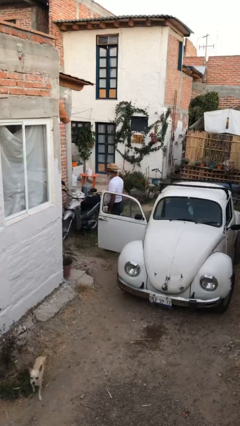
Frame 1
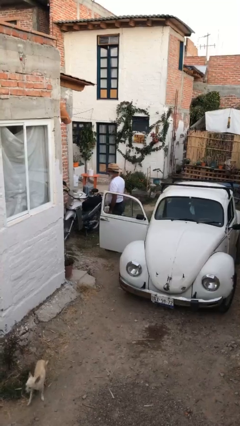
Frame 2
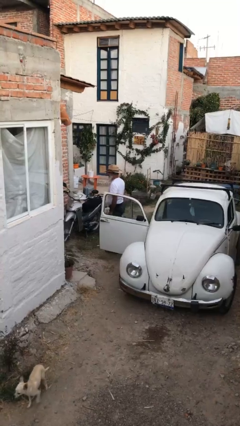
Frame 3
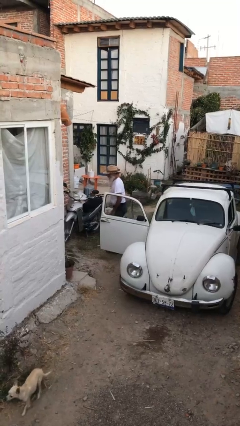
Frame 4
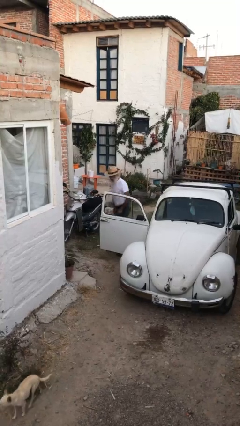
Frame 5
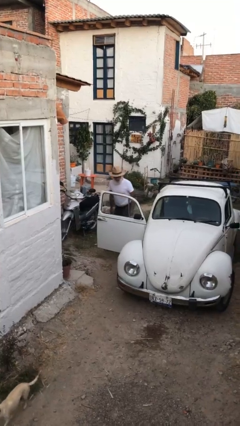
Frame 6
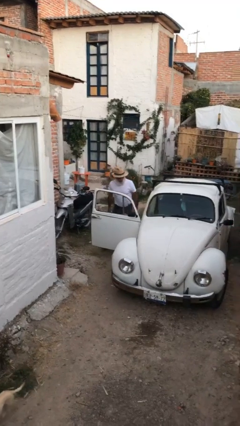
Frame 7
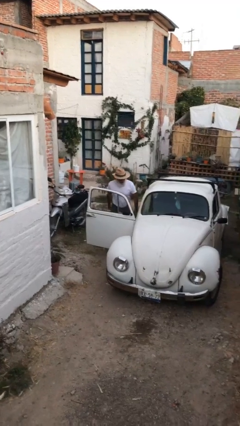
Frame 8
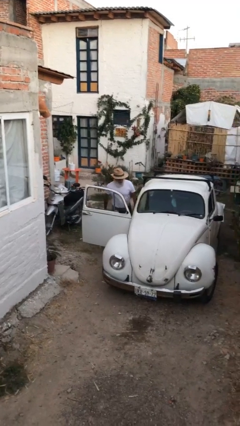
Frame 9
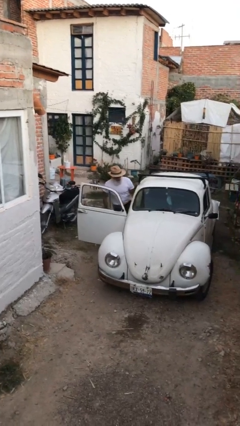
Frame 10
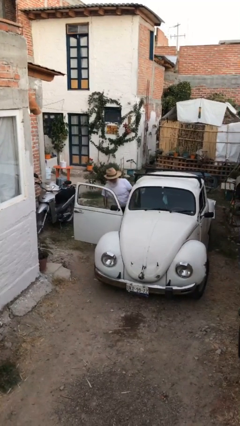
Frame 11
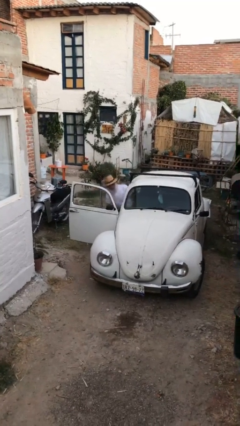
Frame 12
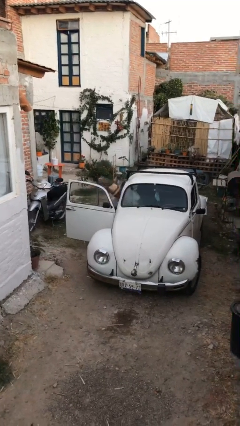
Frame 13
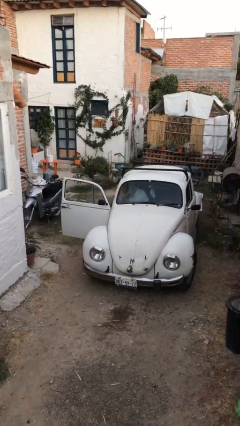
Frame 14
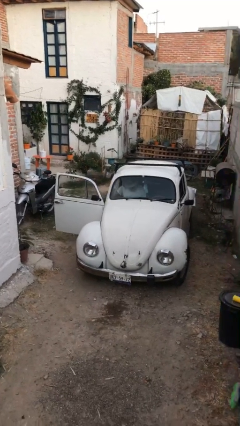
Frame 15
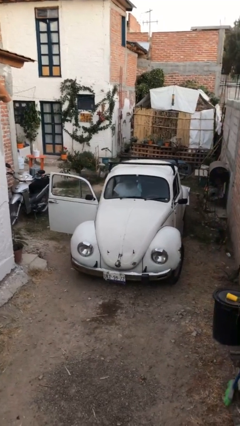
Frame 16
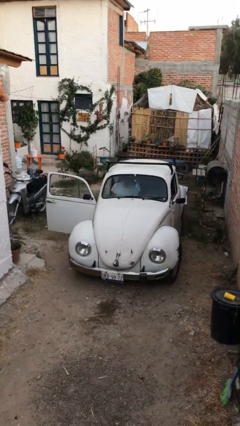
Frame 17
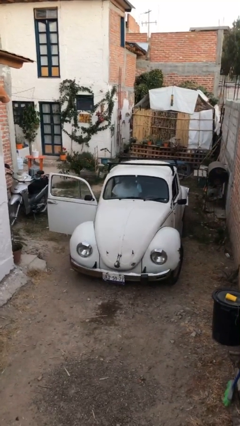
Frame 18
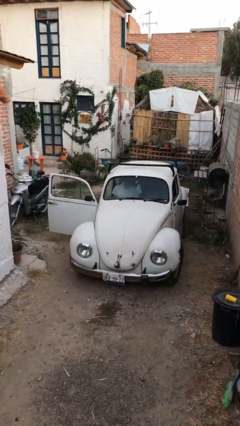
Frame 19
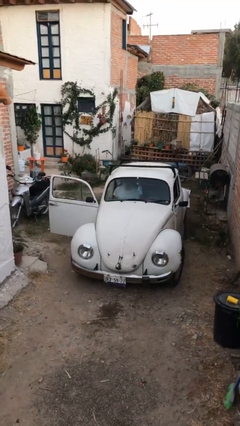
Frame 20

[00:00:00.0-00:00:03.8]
person enters car

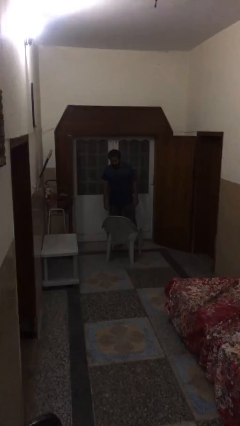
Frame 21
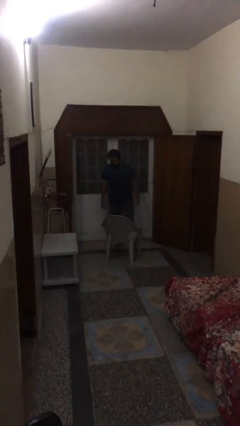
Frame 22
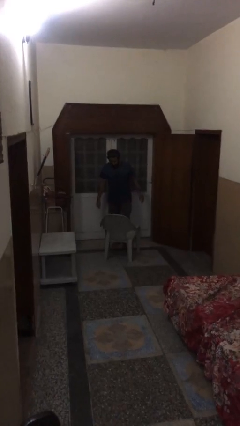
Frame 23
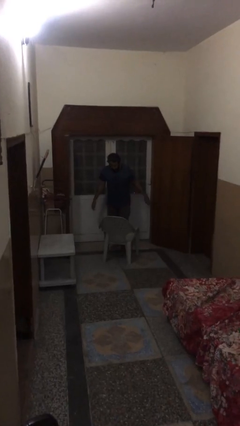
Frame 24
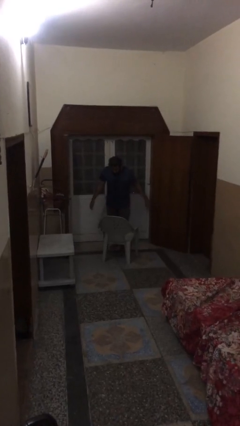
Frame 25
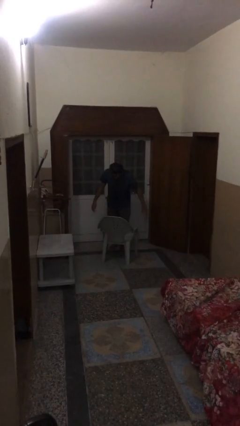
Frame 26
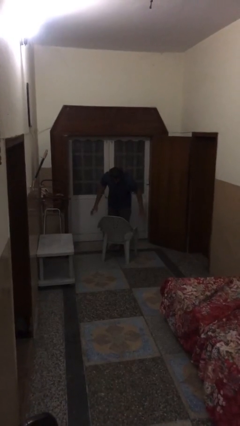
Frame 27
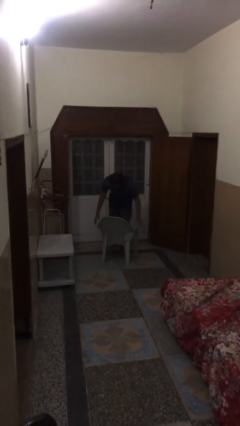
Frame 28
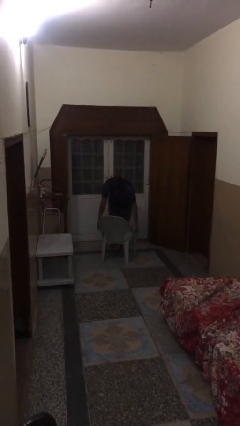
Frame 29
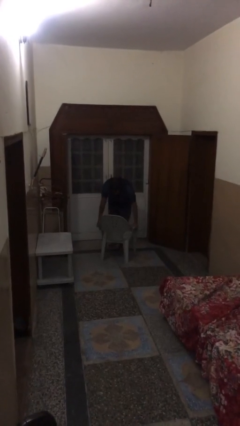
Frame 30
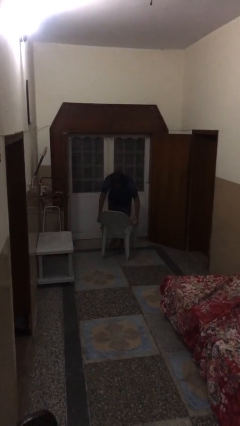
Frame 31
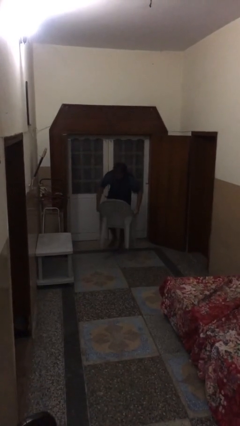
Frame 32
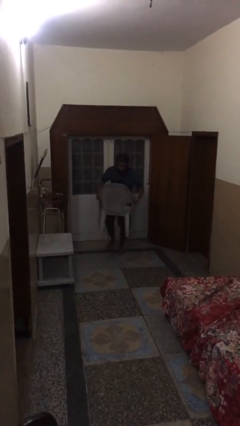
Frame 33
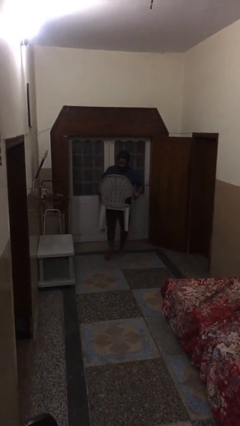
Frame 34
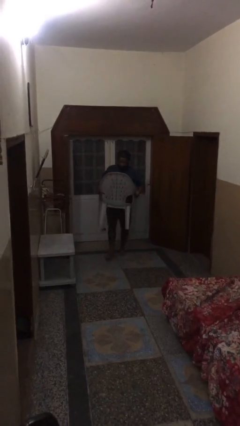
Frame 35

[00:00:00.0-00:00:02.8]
person picks up object from floor

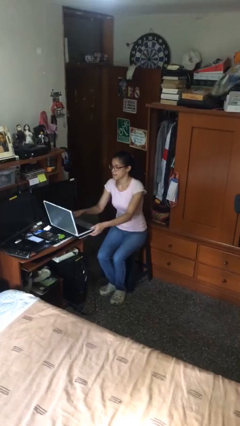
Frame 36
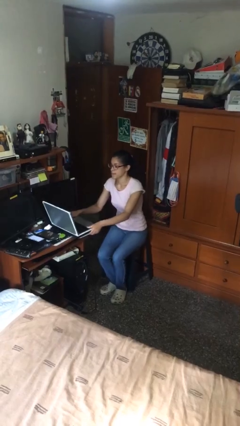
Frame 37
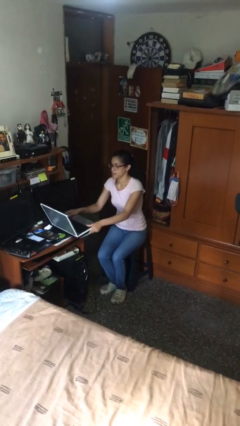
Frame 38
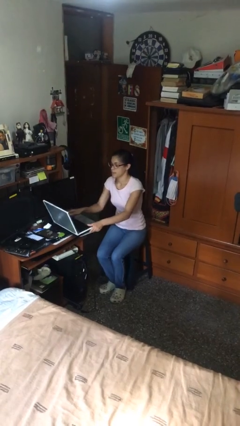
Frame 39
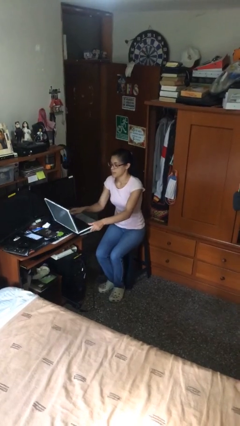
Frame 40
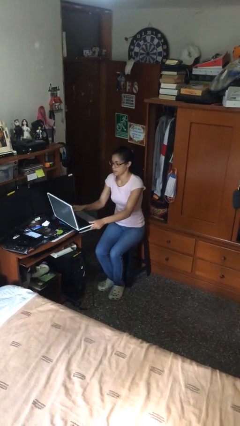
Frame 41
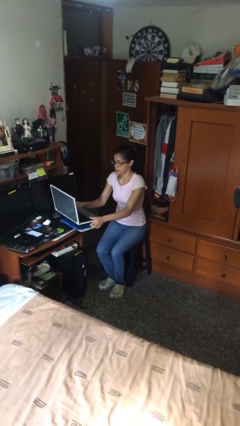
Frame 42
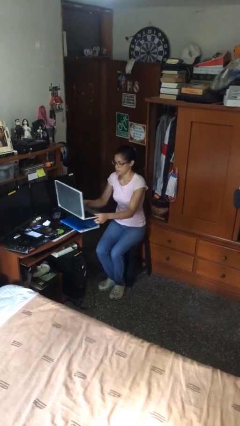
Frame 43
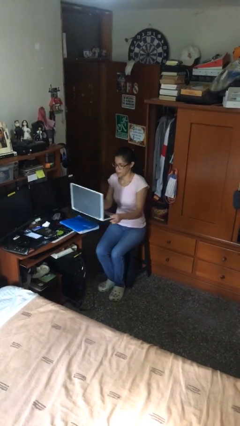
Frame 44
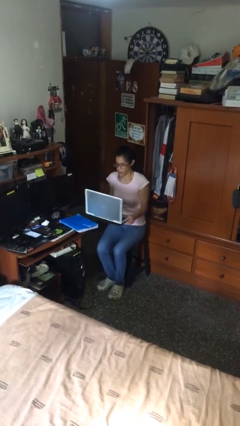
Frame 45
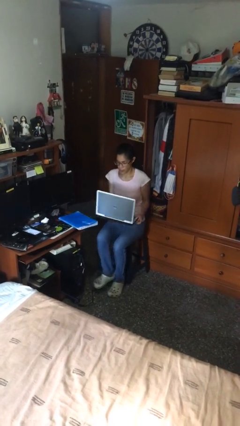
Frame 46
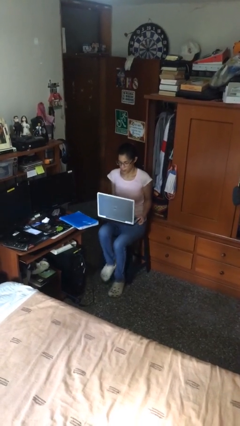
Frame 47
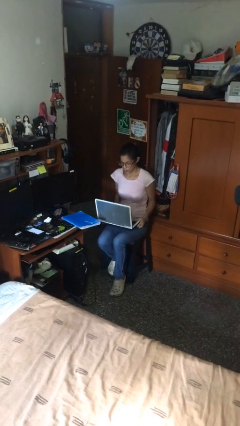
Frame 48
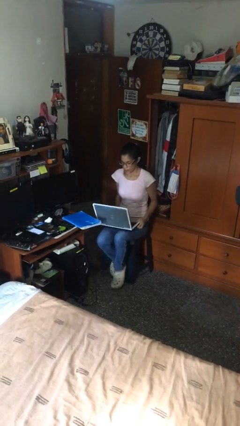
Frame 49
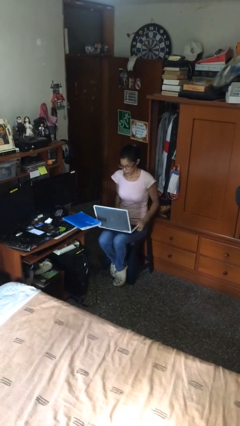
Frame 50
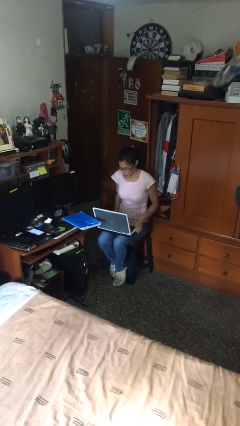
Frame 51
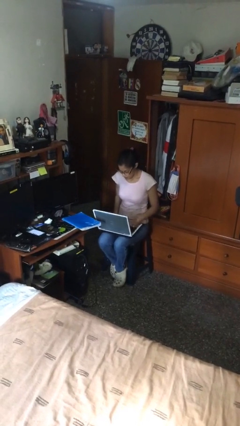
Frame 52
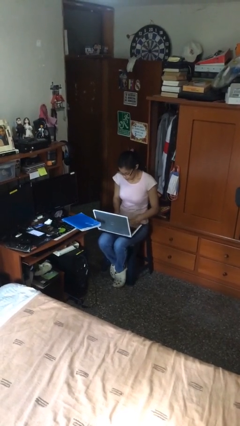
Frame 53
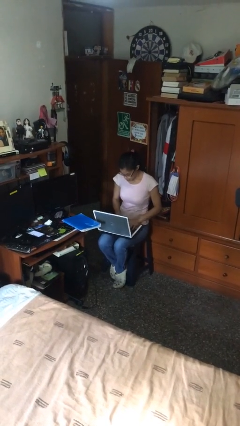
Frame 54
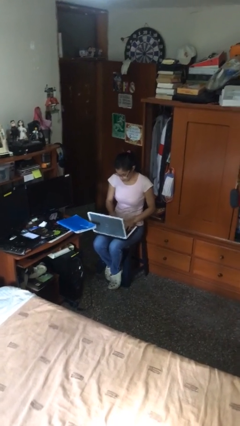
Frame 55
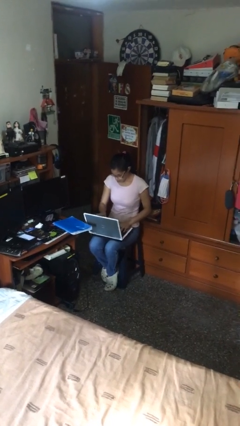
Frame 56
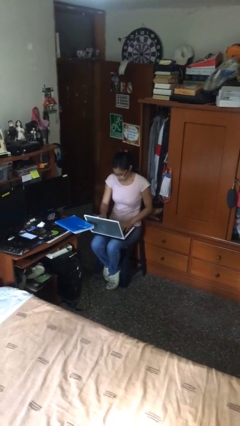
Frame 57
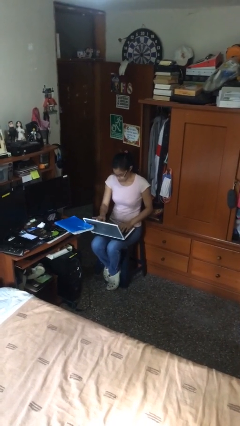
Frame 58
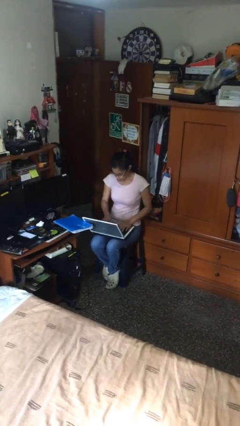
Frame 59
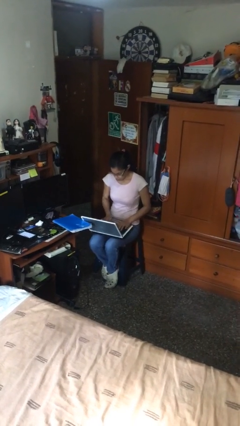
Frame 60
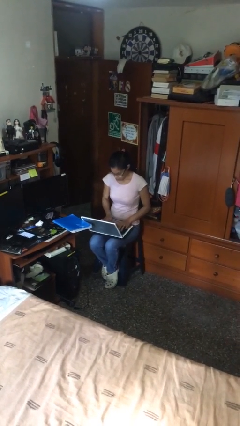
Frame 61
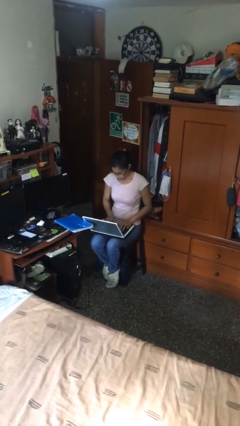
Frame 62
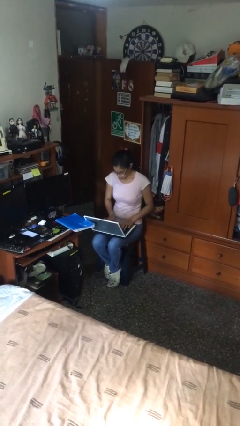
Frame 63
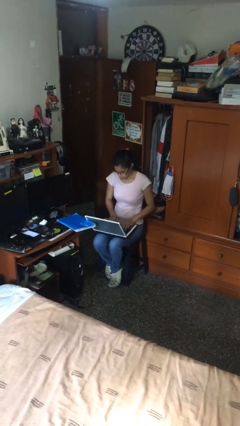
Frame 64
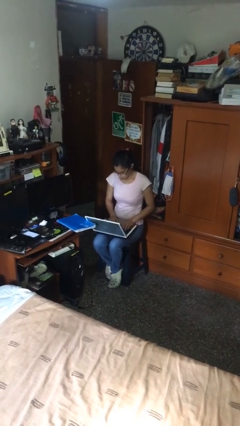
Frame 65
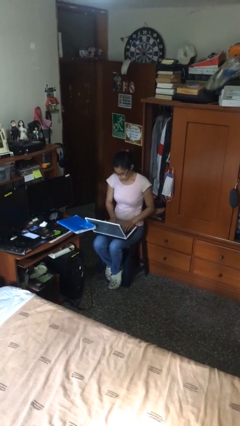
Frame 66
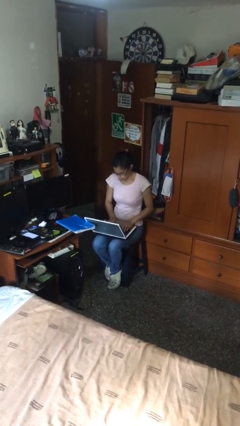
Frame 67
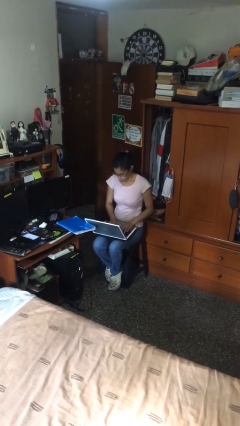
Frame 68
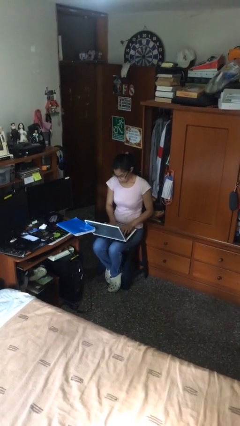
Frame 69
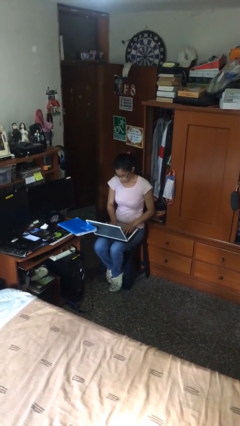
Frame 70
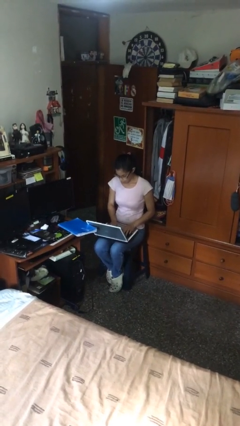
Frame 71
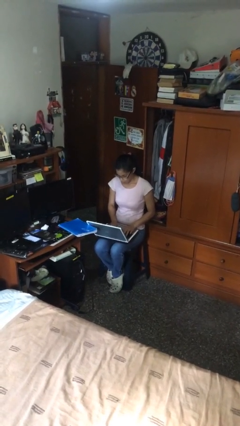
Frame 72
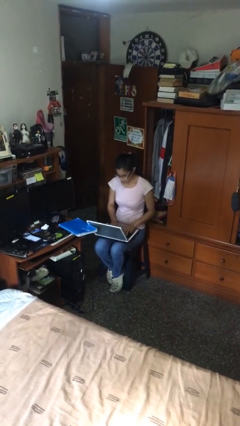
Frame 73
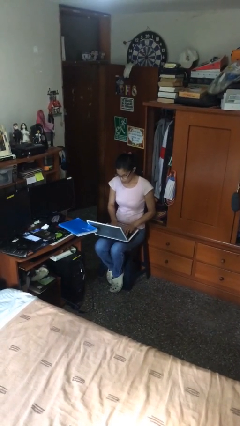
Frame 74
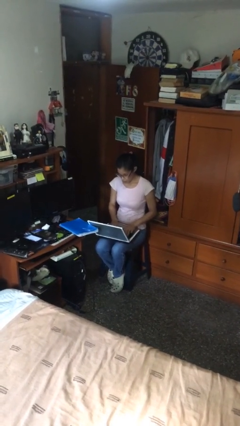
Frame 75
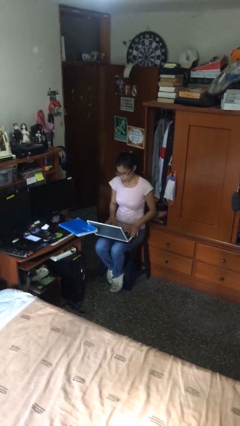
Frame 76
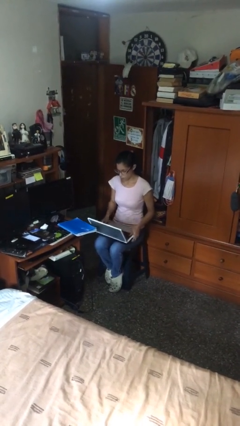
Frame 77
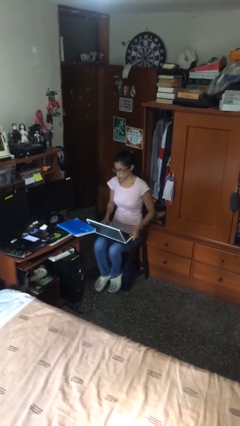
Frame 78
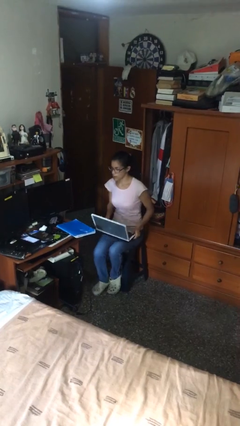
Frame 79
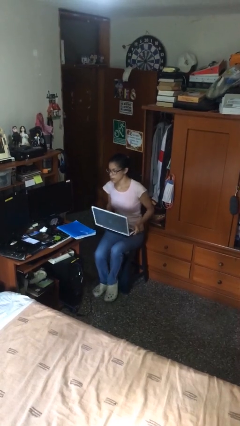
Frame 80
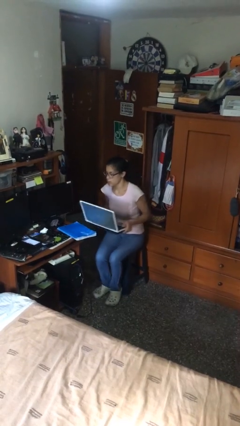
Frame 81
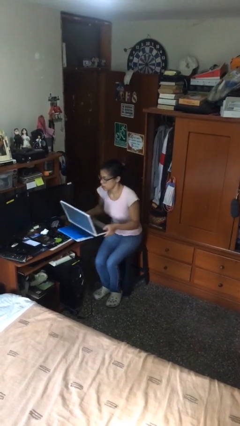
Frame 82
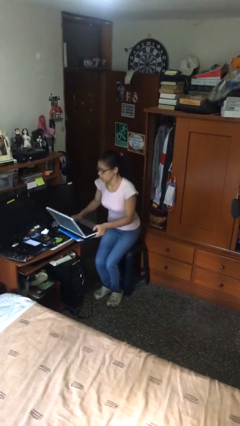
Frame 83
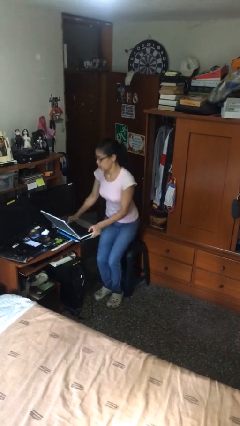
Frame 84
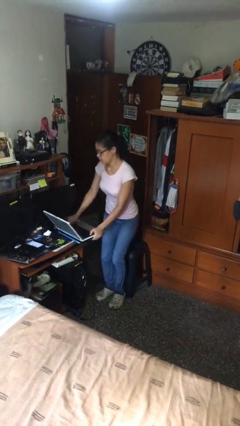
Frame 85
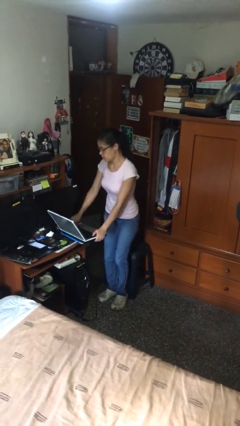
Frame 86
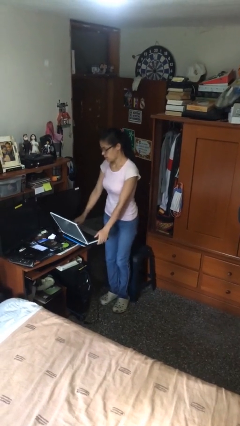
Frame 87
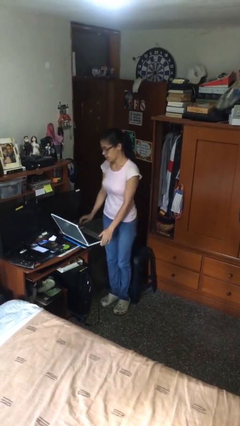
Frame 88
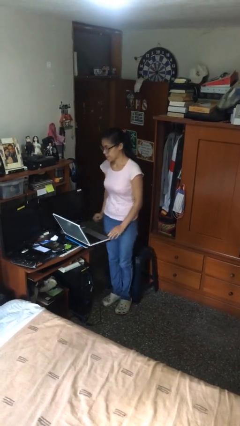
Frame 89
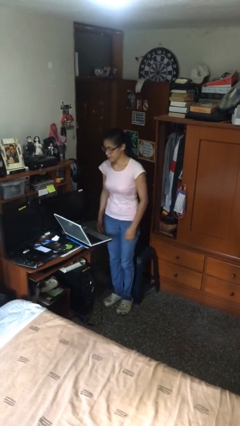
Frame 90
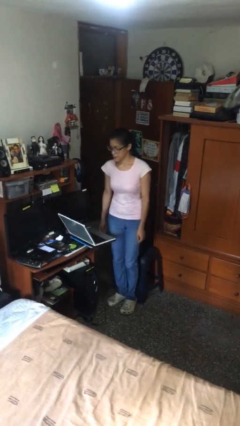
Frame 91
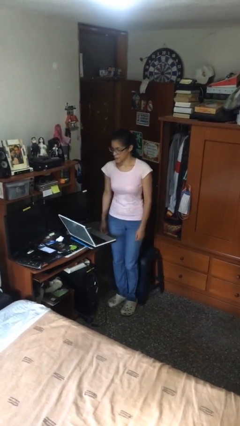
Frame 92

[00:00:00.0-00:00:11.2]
person interacts with laptop
